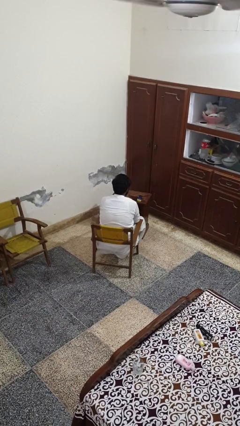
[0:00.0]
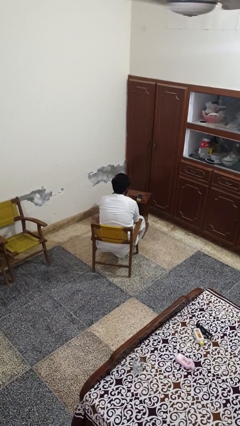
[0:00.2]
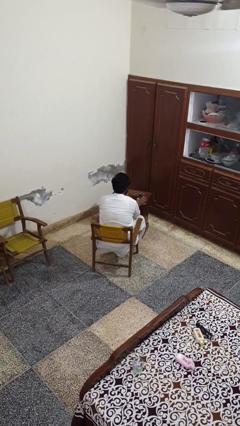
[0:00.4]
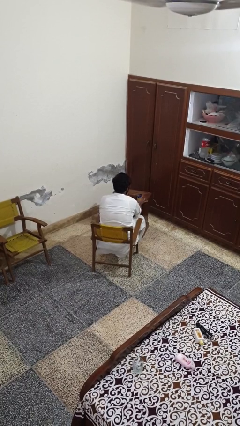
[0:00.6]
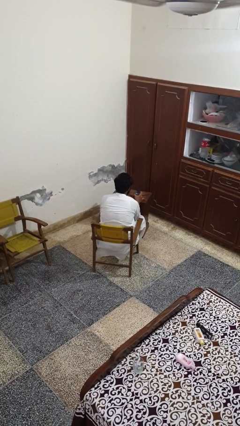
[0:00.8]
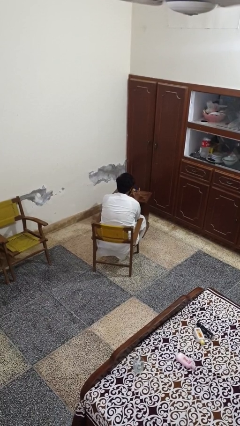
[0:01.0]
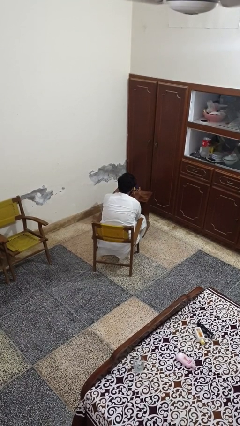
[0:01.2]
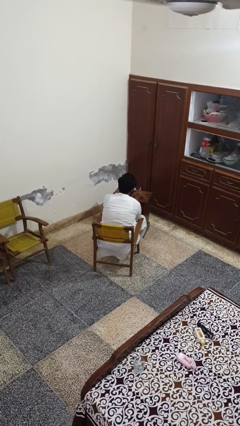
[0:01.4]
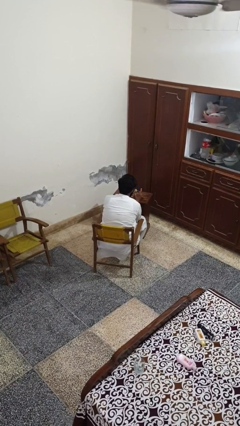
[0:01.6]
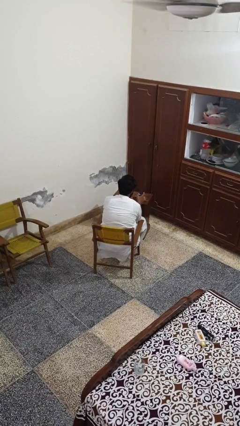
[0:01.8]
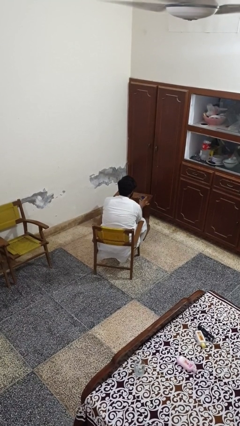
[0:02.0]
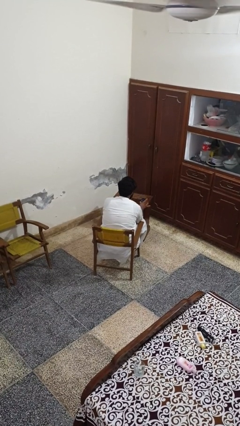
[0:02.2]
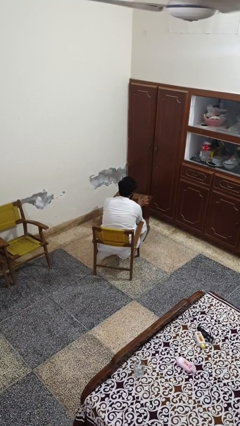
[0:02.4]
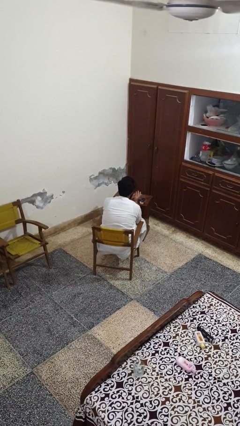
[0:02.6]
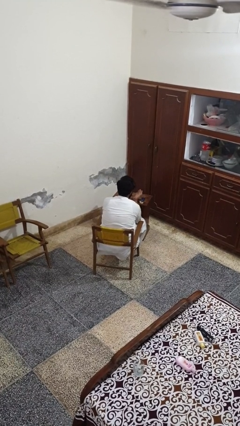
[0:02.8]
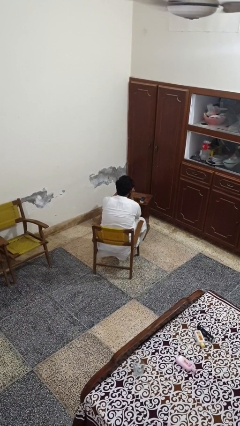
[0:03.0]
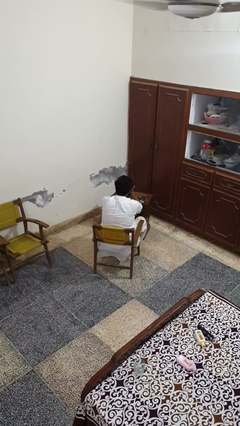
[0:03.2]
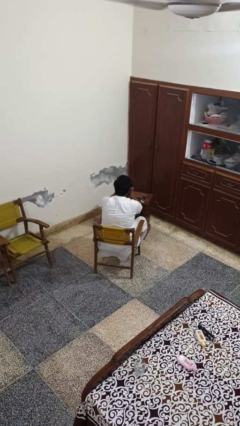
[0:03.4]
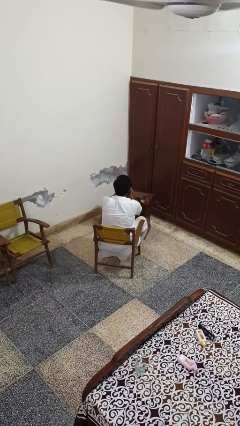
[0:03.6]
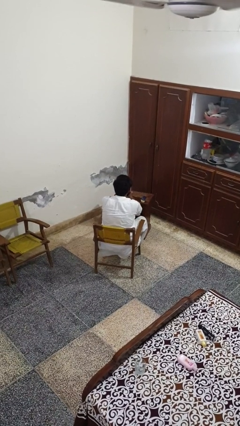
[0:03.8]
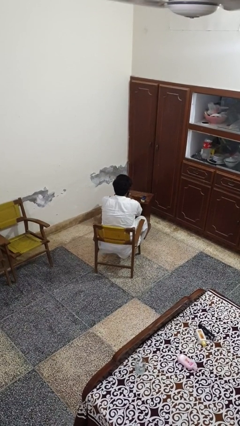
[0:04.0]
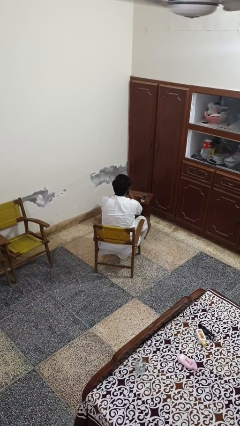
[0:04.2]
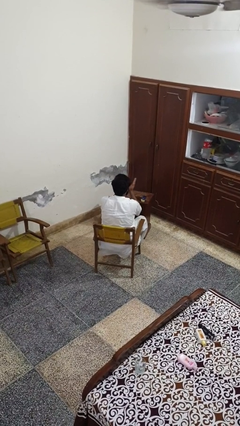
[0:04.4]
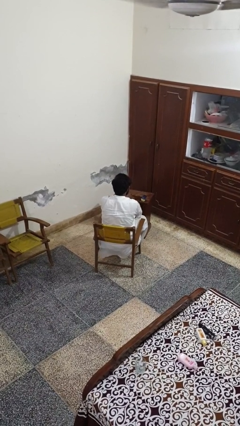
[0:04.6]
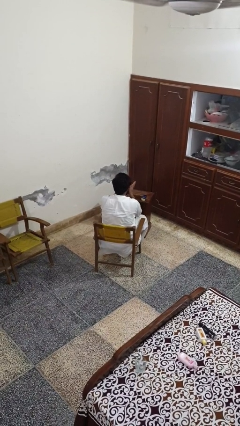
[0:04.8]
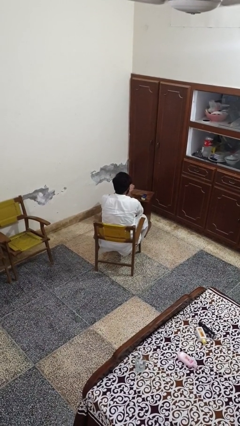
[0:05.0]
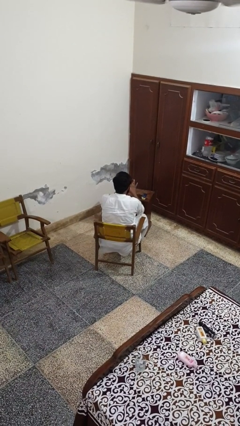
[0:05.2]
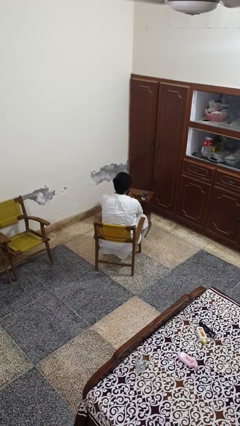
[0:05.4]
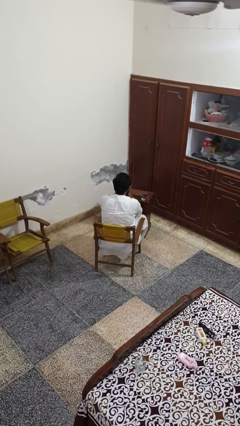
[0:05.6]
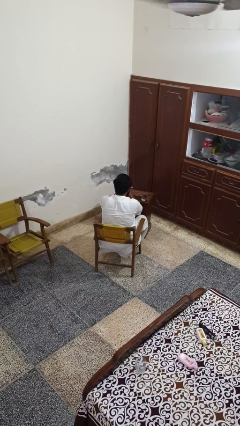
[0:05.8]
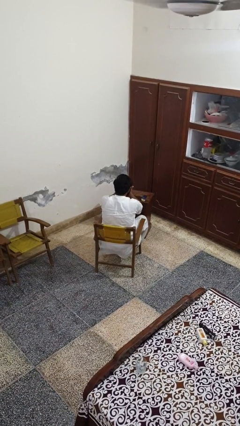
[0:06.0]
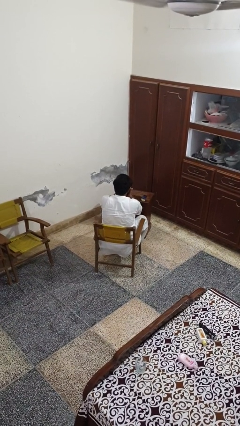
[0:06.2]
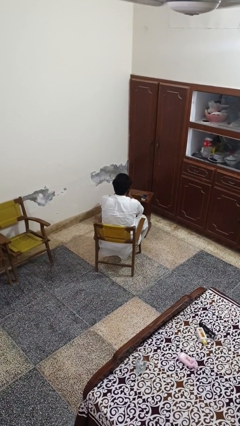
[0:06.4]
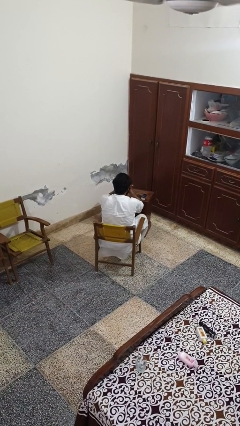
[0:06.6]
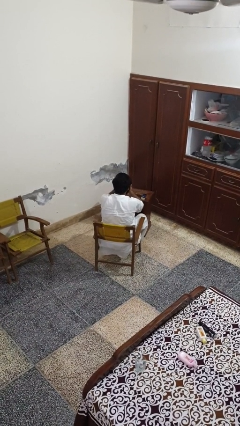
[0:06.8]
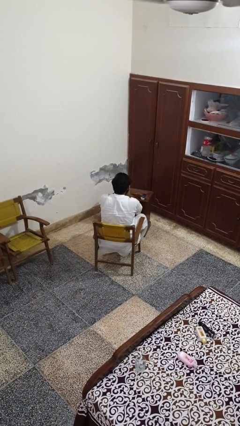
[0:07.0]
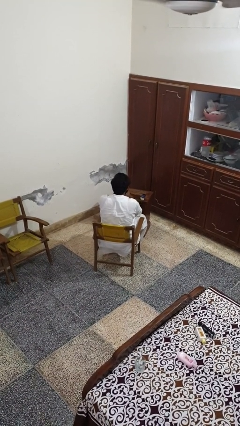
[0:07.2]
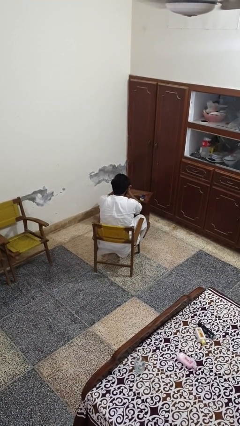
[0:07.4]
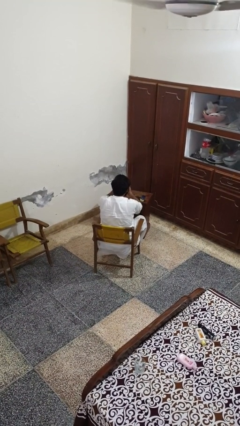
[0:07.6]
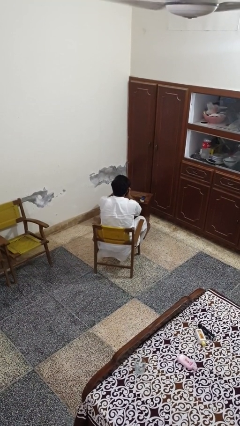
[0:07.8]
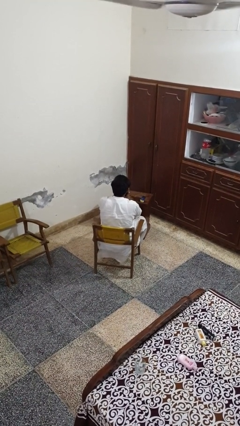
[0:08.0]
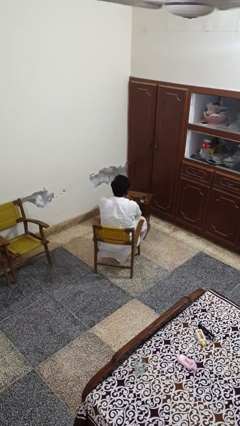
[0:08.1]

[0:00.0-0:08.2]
person applies facial moisturizer

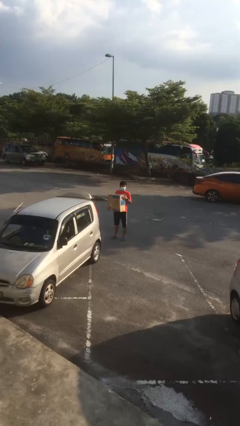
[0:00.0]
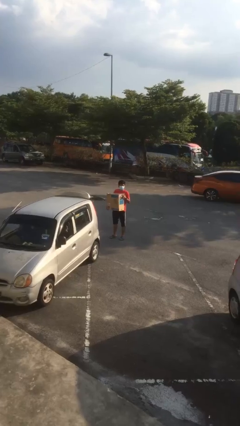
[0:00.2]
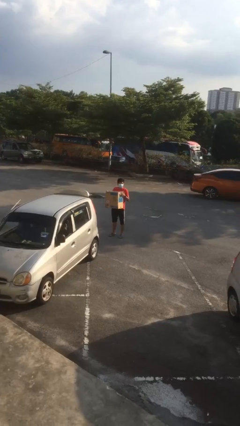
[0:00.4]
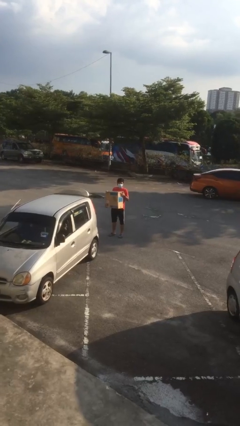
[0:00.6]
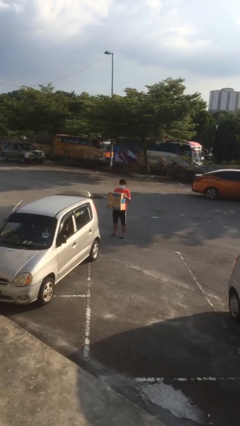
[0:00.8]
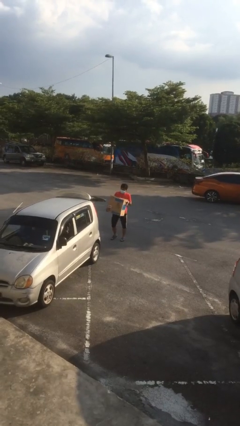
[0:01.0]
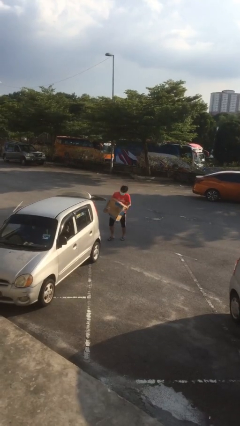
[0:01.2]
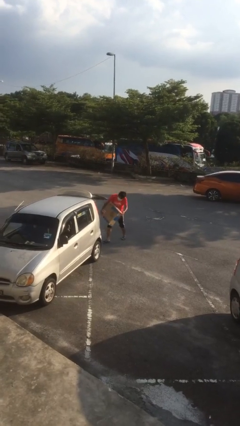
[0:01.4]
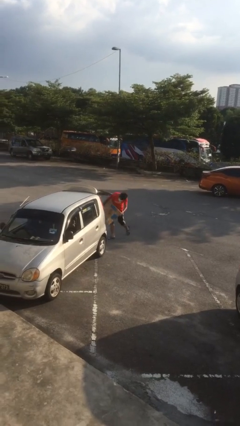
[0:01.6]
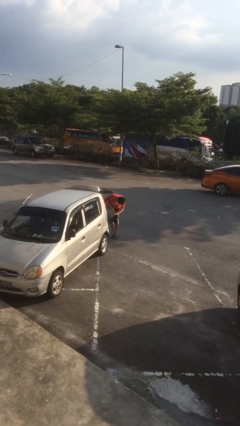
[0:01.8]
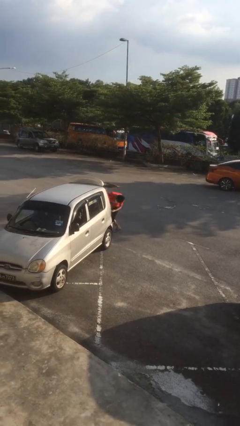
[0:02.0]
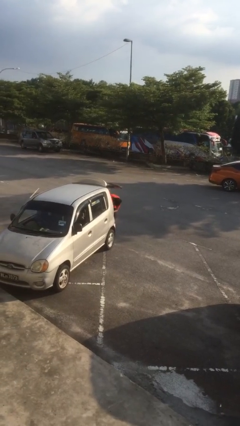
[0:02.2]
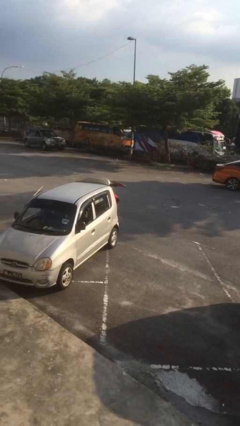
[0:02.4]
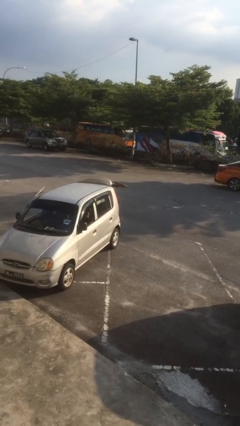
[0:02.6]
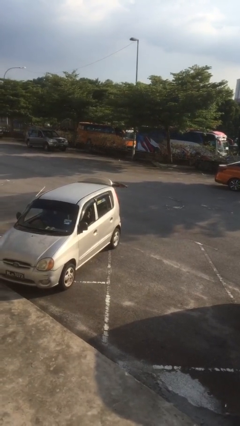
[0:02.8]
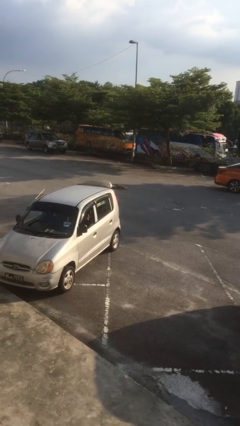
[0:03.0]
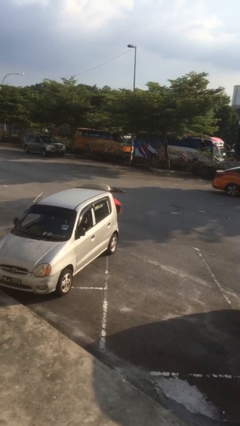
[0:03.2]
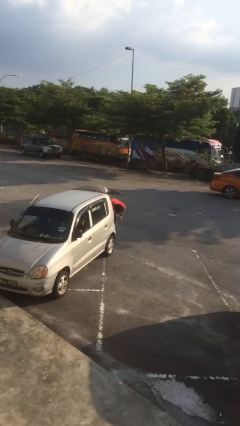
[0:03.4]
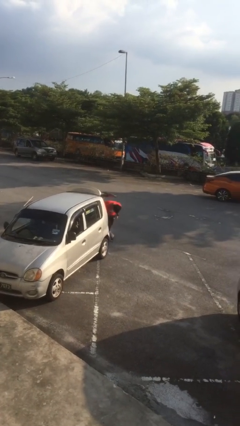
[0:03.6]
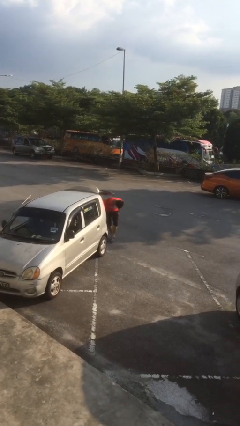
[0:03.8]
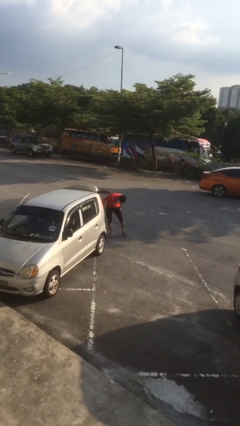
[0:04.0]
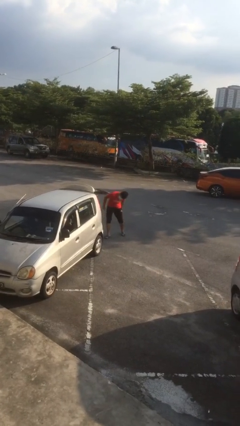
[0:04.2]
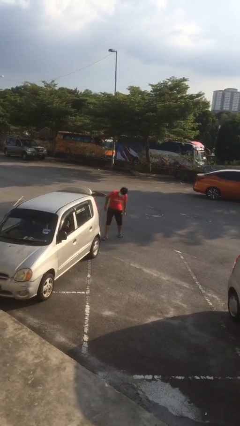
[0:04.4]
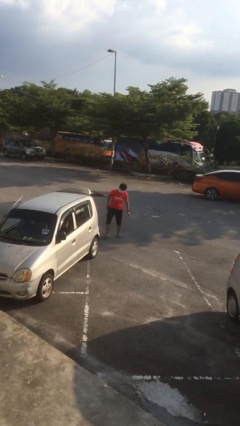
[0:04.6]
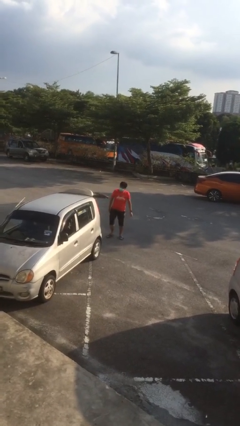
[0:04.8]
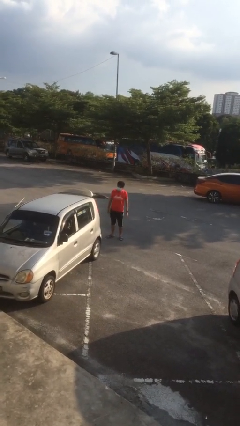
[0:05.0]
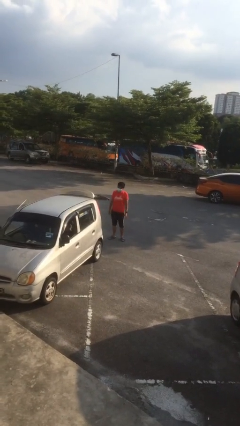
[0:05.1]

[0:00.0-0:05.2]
person loads car

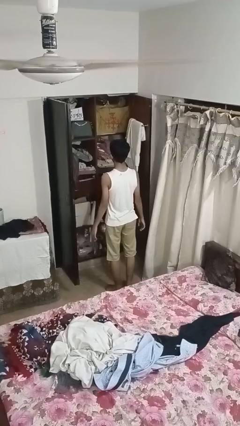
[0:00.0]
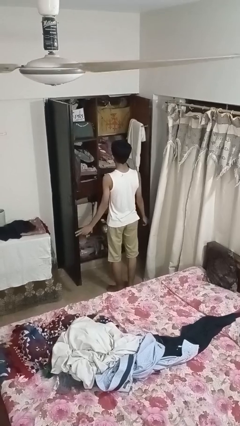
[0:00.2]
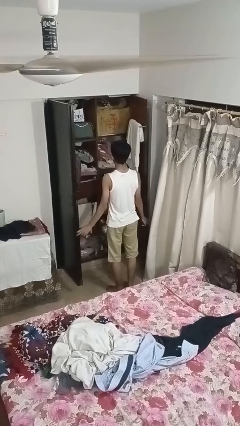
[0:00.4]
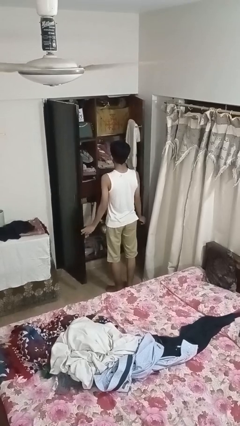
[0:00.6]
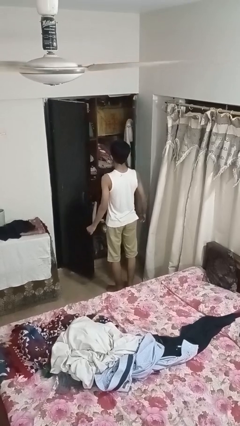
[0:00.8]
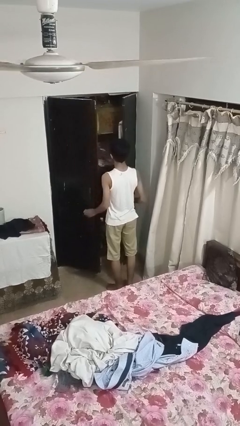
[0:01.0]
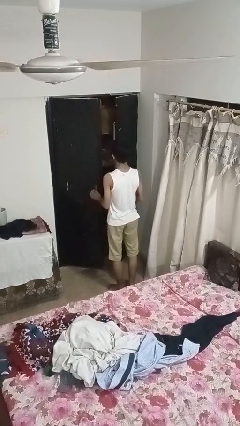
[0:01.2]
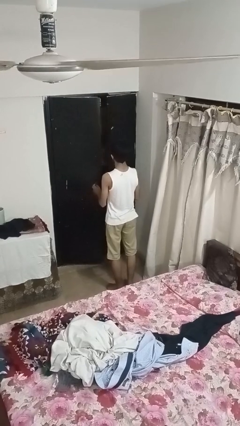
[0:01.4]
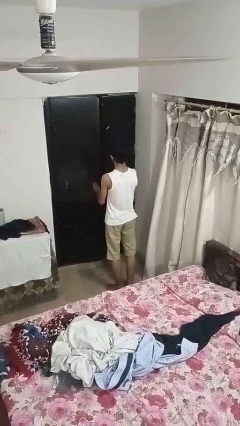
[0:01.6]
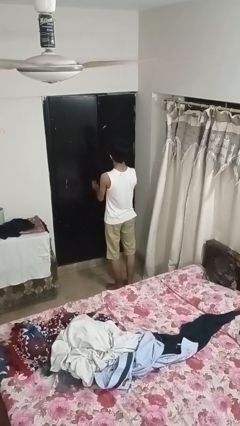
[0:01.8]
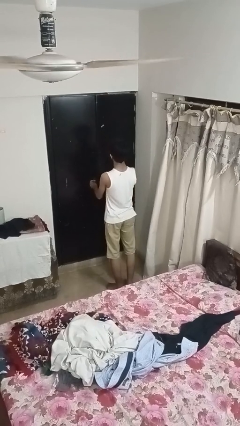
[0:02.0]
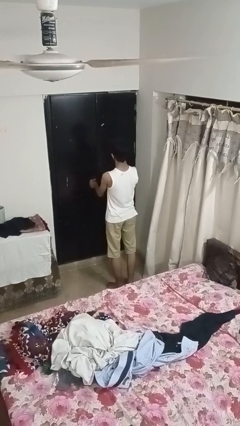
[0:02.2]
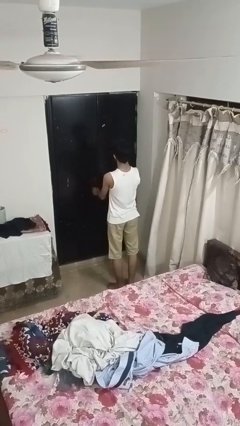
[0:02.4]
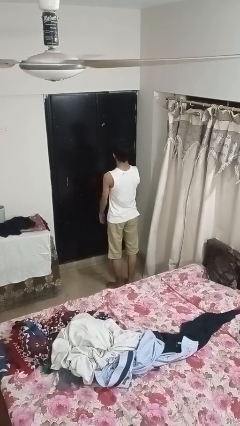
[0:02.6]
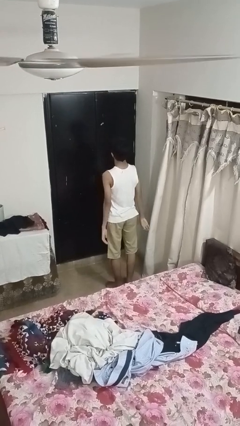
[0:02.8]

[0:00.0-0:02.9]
person closes closet door

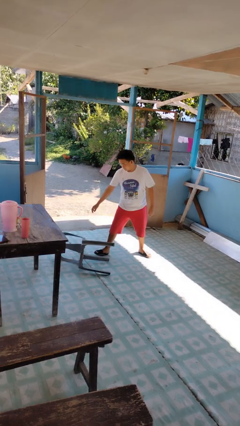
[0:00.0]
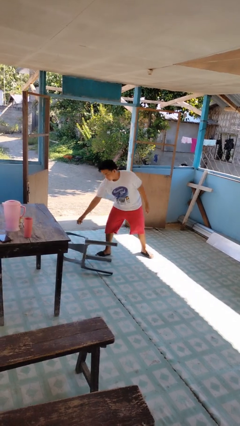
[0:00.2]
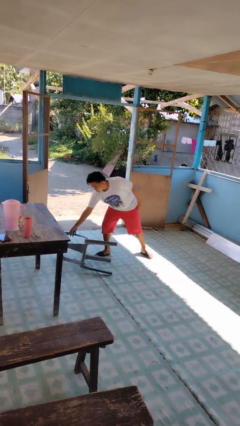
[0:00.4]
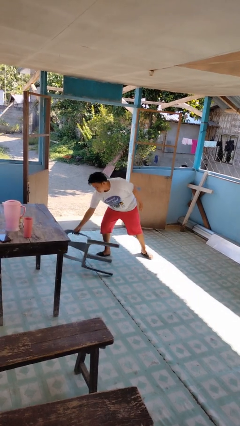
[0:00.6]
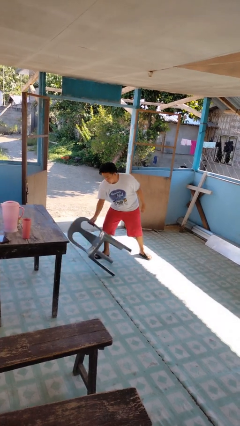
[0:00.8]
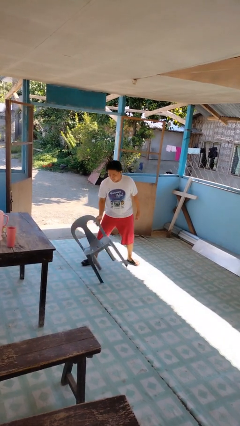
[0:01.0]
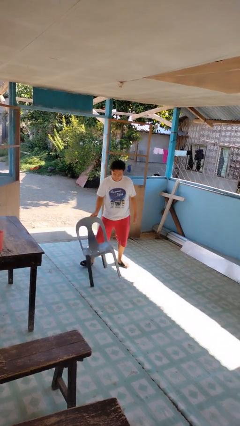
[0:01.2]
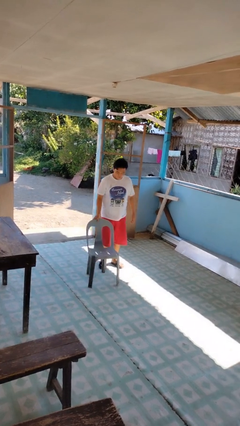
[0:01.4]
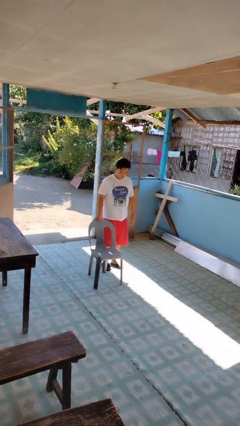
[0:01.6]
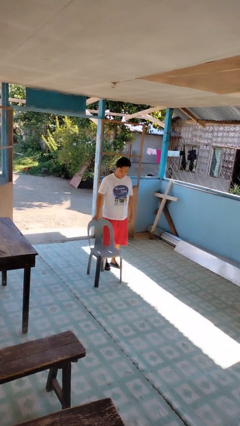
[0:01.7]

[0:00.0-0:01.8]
person sets upright furniture
